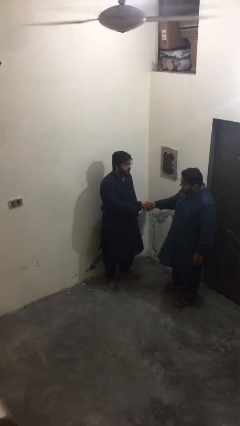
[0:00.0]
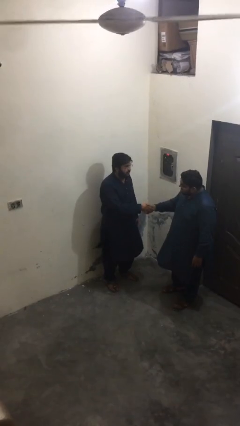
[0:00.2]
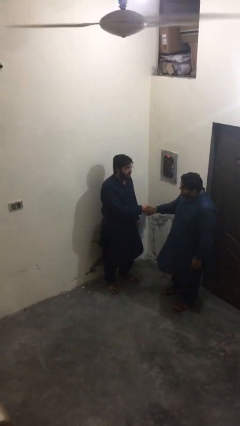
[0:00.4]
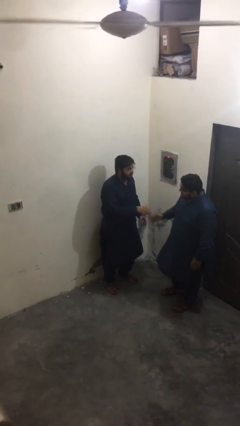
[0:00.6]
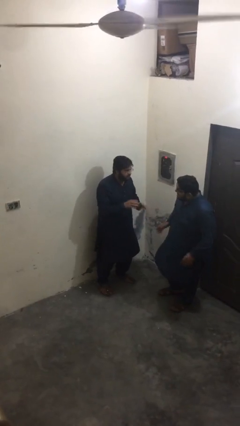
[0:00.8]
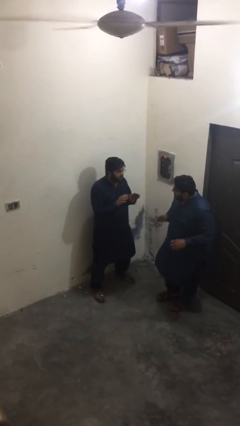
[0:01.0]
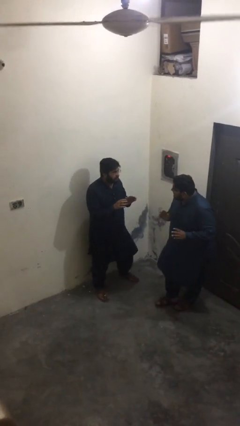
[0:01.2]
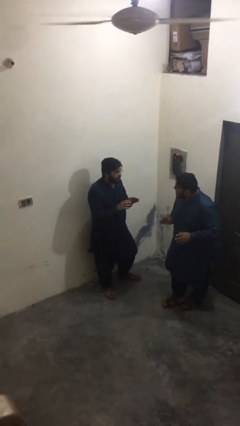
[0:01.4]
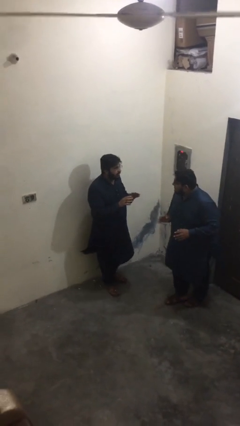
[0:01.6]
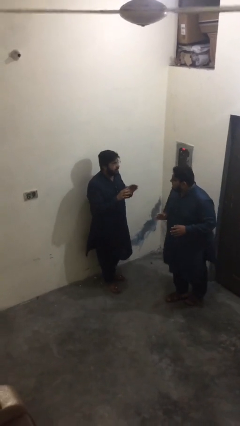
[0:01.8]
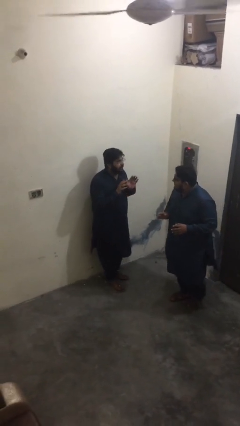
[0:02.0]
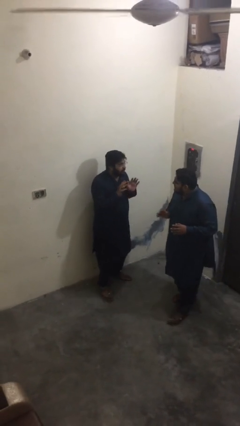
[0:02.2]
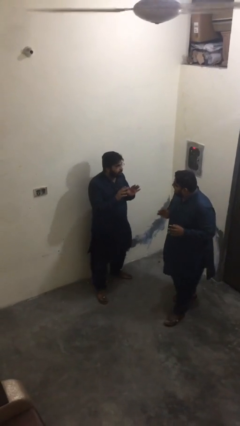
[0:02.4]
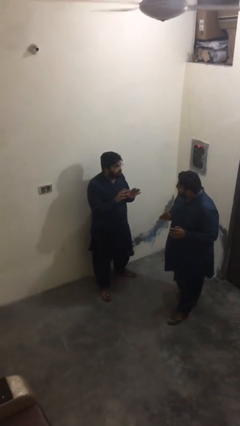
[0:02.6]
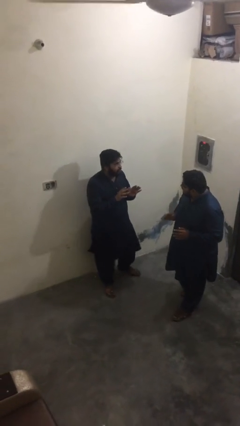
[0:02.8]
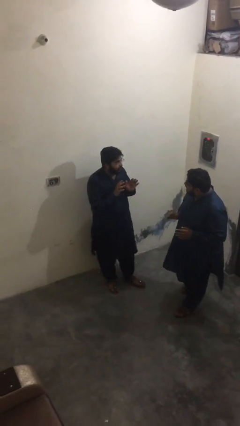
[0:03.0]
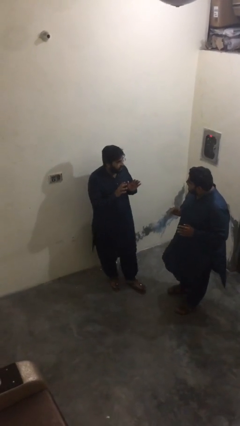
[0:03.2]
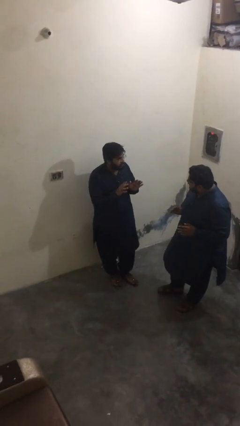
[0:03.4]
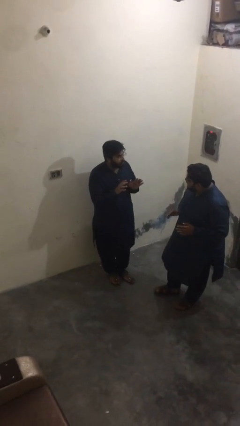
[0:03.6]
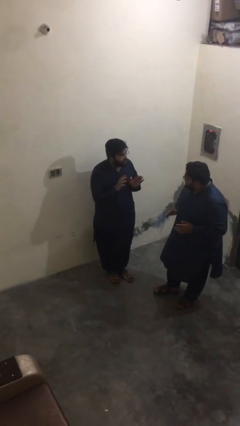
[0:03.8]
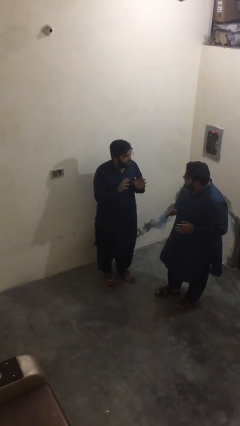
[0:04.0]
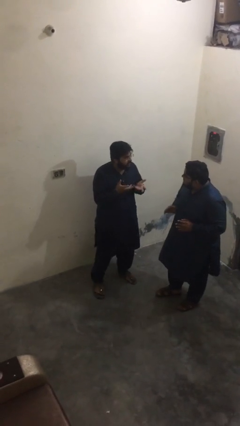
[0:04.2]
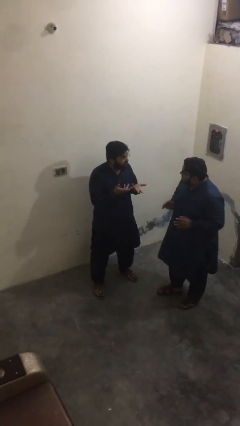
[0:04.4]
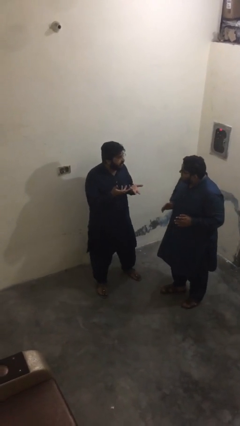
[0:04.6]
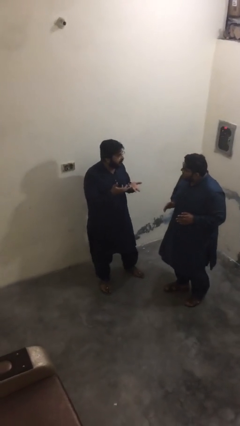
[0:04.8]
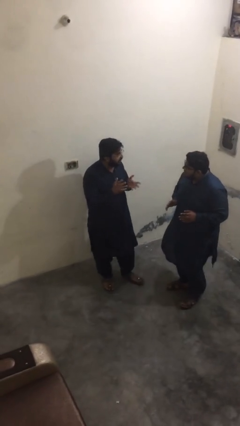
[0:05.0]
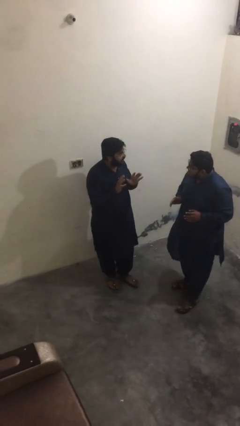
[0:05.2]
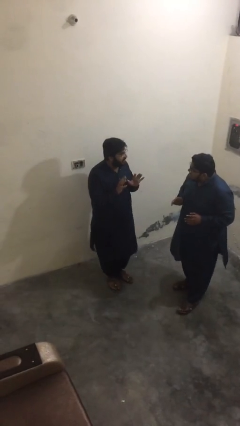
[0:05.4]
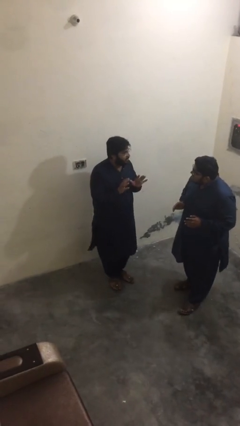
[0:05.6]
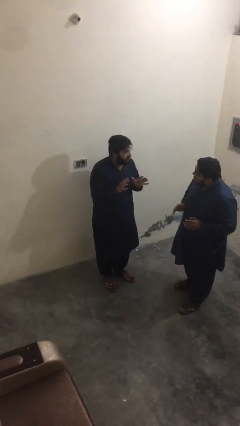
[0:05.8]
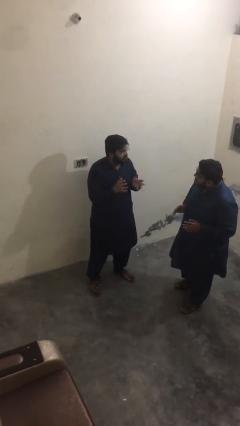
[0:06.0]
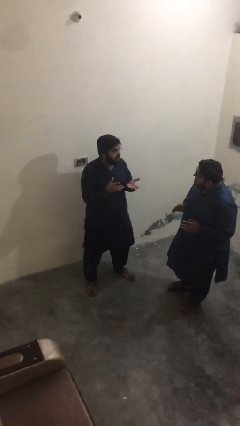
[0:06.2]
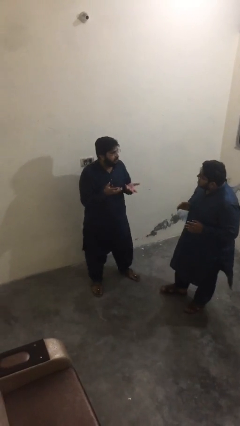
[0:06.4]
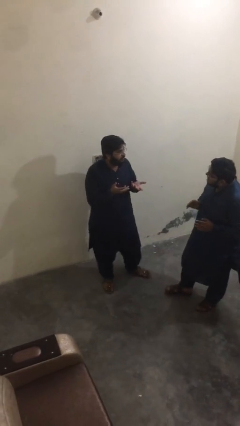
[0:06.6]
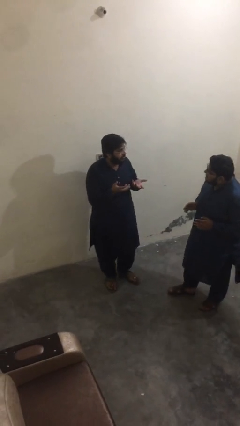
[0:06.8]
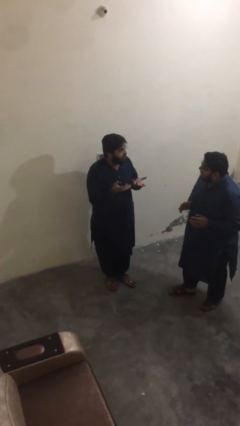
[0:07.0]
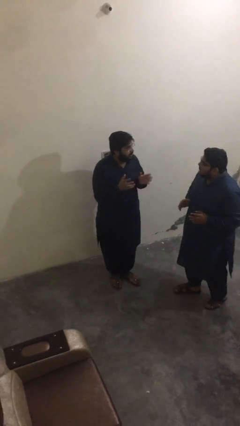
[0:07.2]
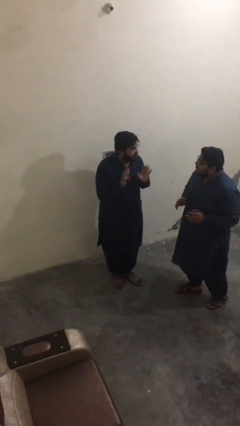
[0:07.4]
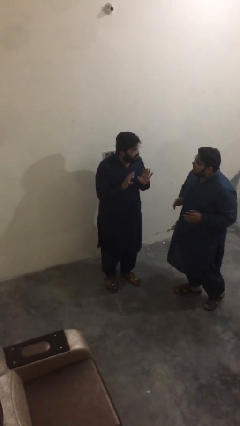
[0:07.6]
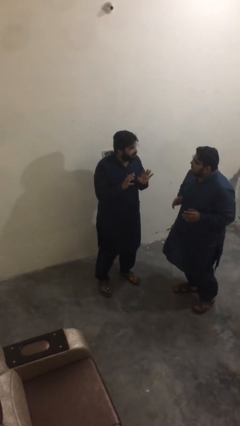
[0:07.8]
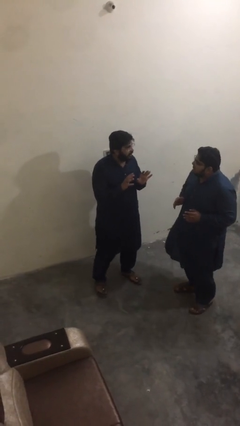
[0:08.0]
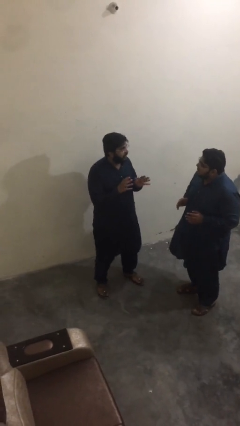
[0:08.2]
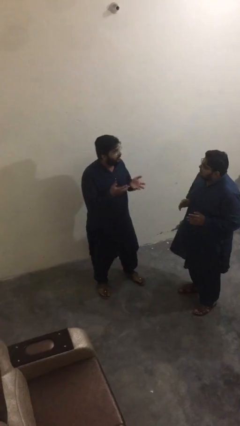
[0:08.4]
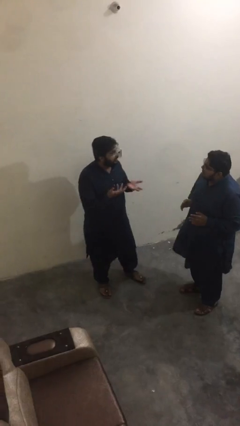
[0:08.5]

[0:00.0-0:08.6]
person talks to person

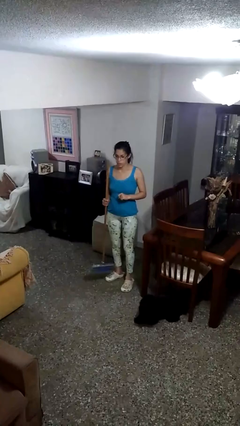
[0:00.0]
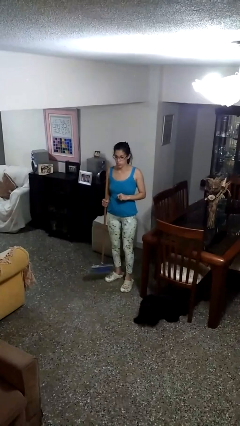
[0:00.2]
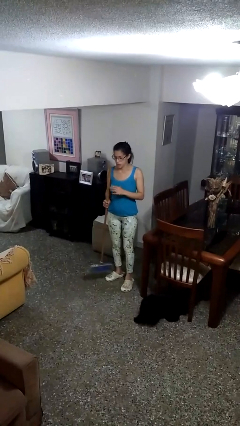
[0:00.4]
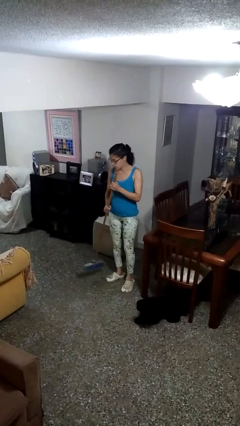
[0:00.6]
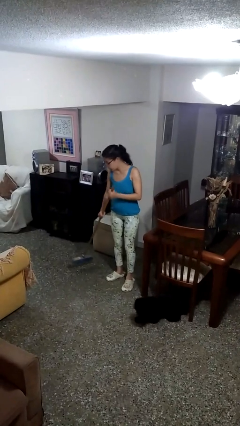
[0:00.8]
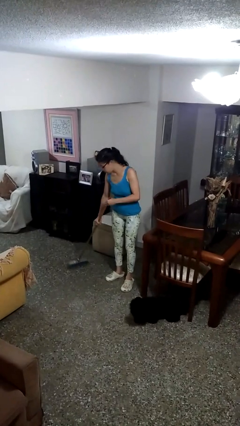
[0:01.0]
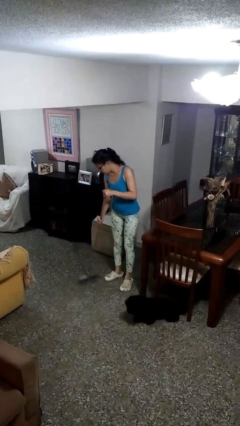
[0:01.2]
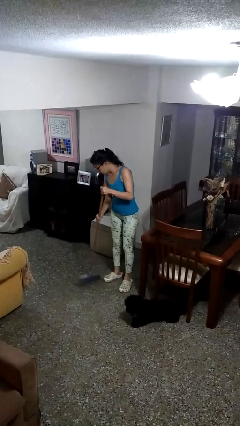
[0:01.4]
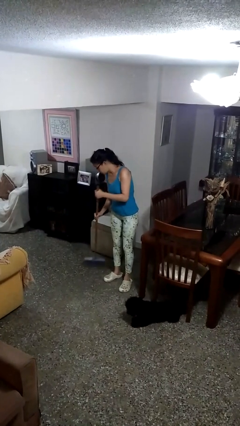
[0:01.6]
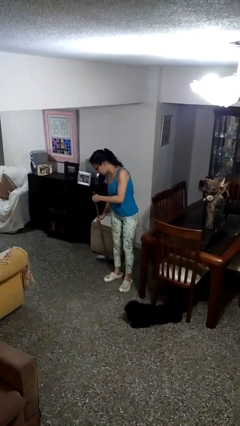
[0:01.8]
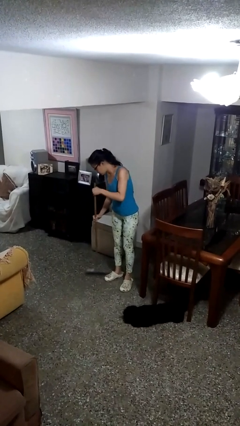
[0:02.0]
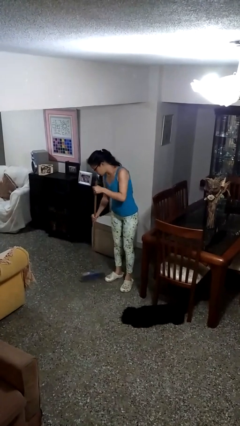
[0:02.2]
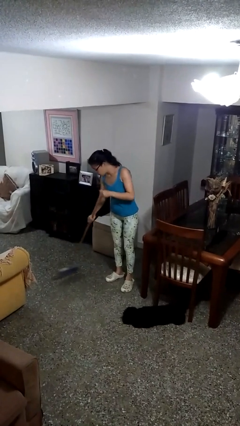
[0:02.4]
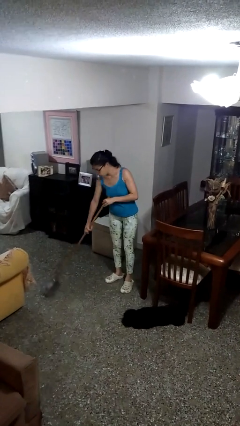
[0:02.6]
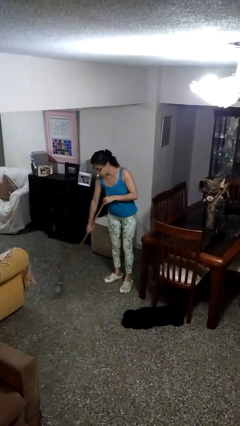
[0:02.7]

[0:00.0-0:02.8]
person sweeps floor

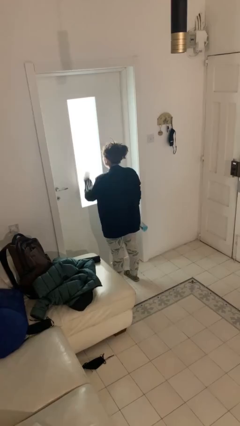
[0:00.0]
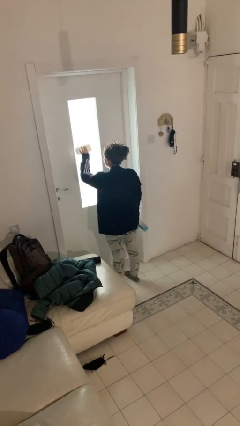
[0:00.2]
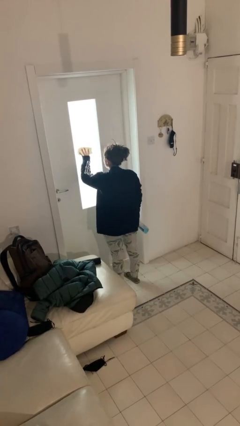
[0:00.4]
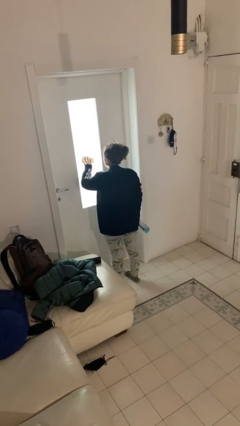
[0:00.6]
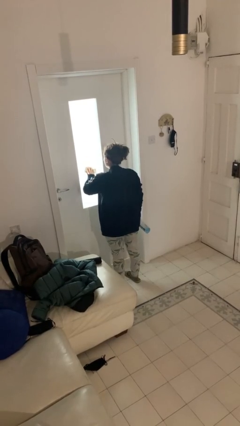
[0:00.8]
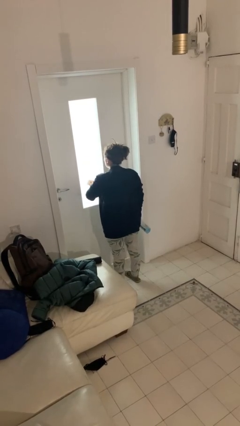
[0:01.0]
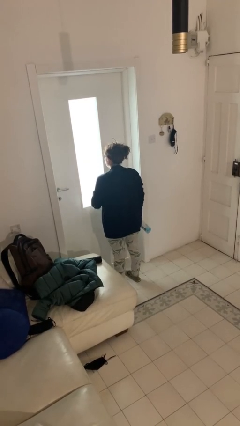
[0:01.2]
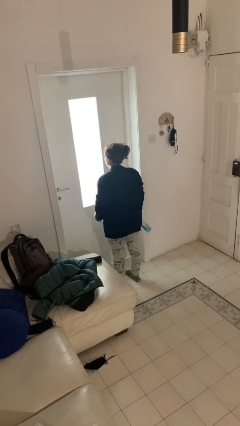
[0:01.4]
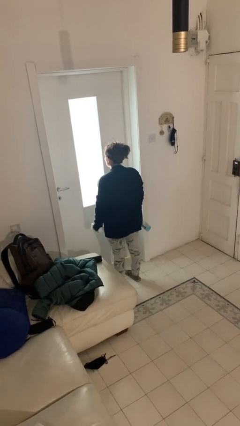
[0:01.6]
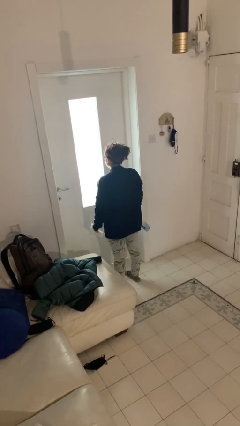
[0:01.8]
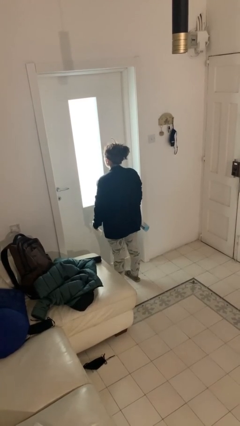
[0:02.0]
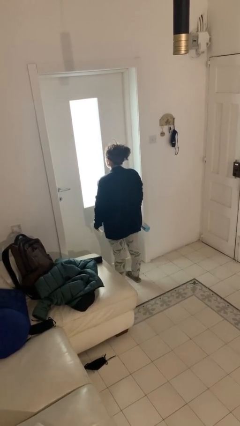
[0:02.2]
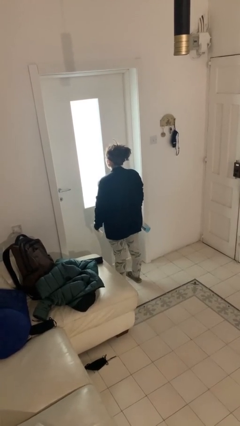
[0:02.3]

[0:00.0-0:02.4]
person washes window

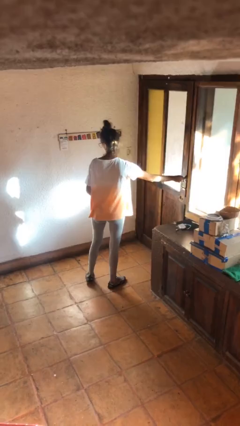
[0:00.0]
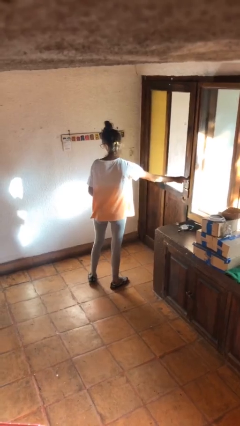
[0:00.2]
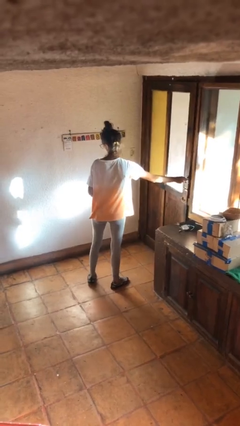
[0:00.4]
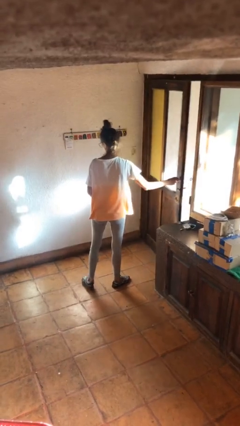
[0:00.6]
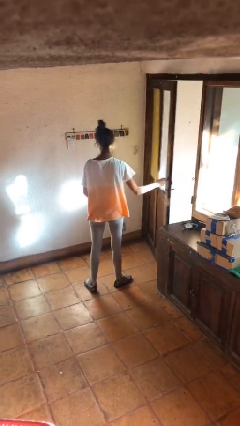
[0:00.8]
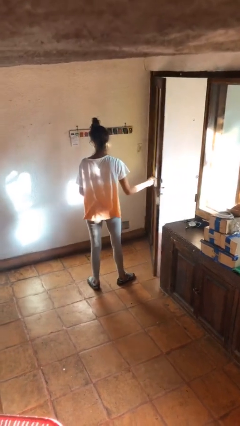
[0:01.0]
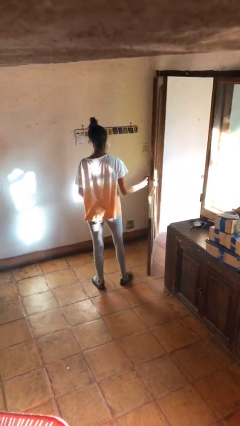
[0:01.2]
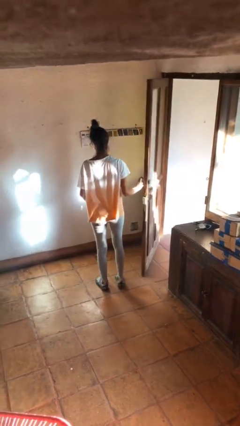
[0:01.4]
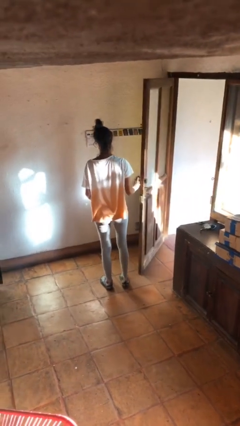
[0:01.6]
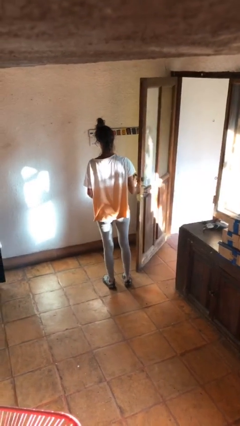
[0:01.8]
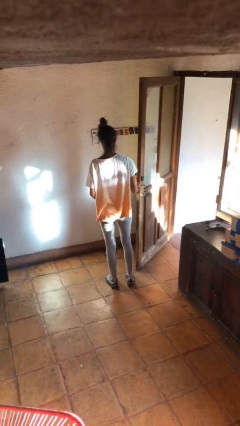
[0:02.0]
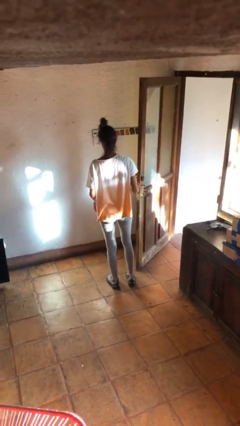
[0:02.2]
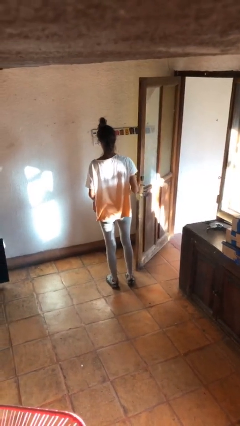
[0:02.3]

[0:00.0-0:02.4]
person opens facility door

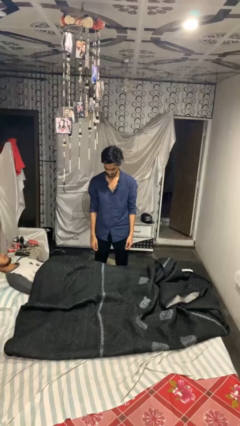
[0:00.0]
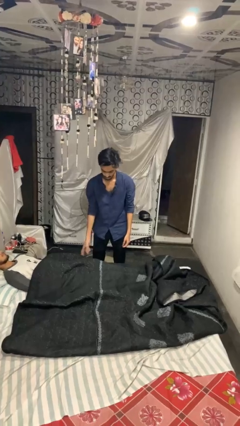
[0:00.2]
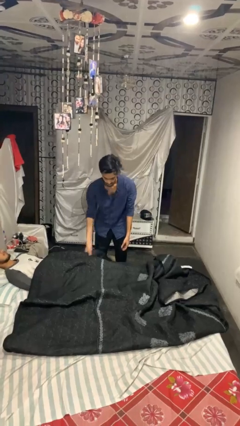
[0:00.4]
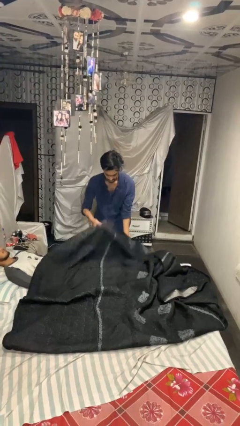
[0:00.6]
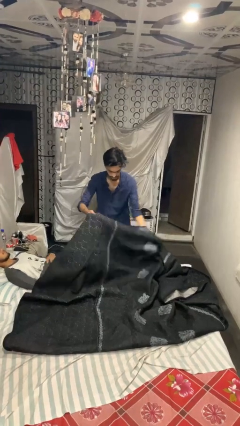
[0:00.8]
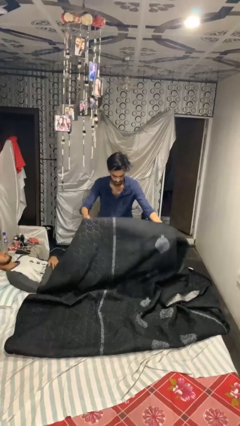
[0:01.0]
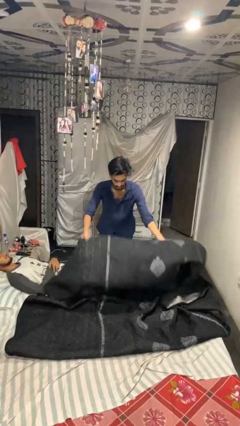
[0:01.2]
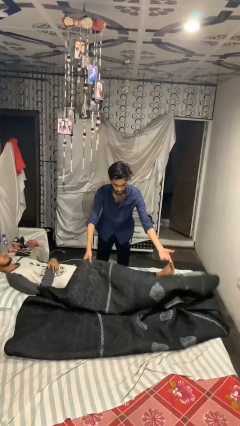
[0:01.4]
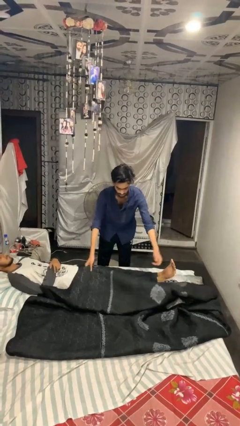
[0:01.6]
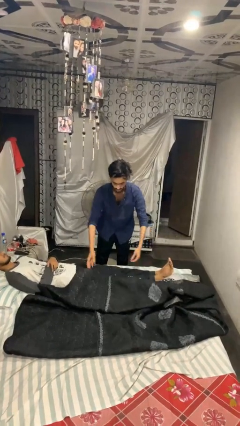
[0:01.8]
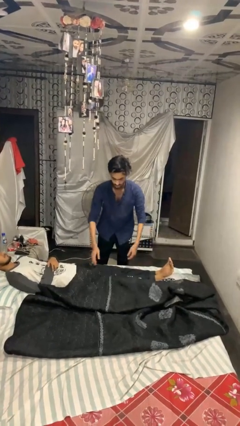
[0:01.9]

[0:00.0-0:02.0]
person uncovers friend with blanket
